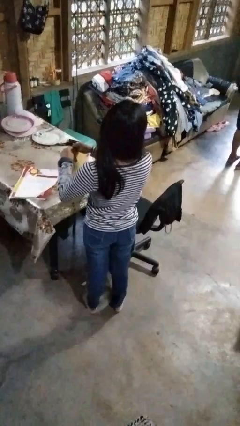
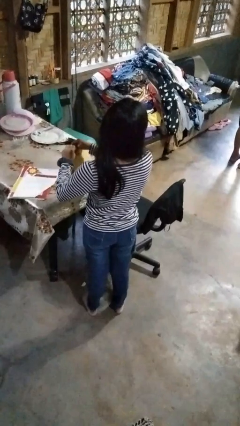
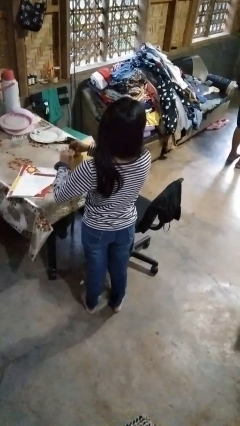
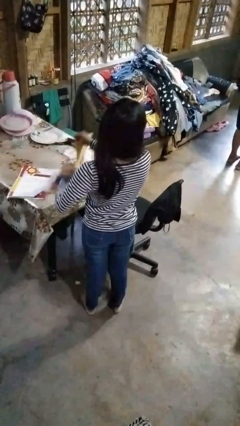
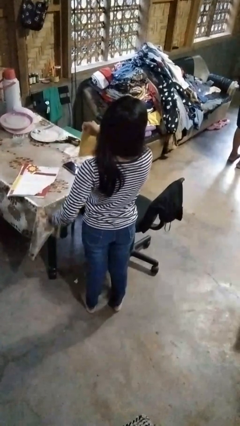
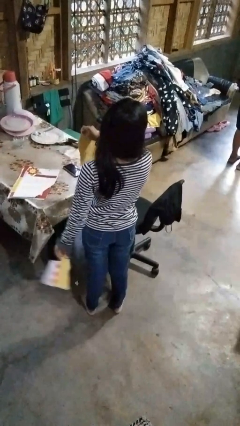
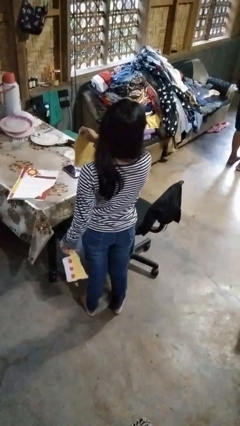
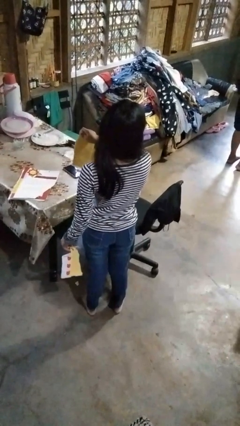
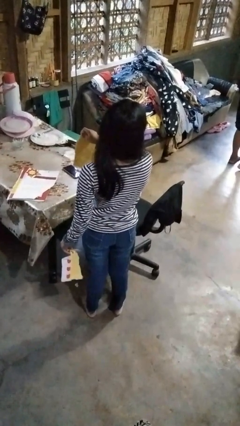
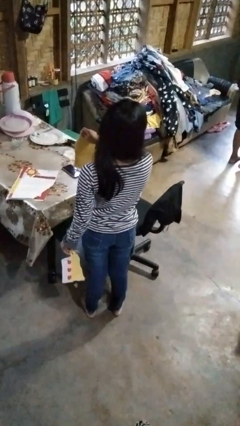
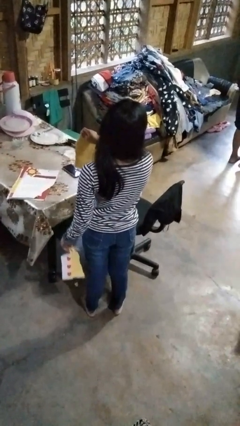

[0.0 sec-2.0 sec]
person tears paper

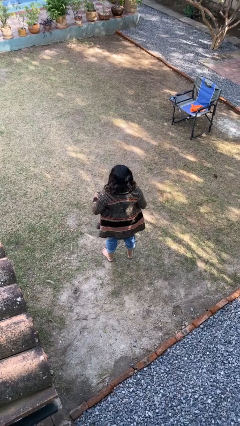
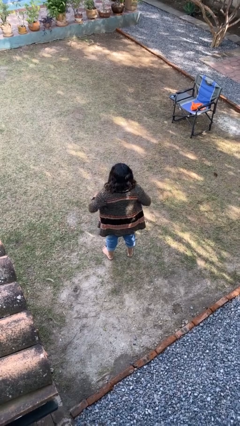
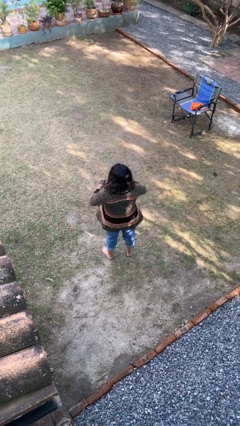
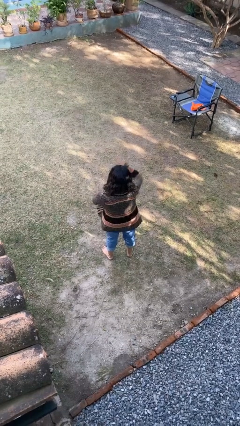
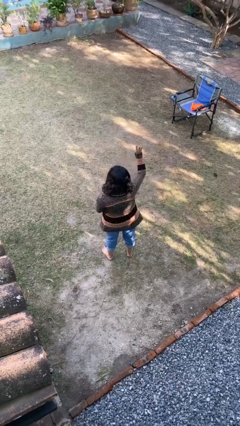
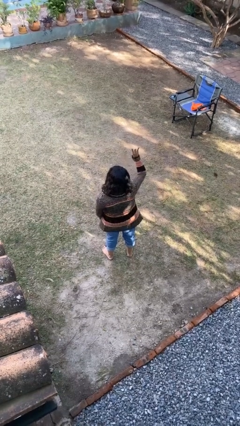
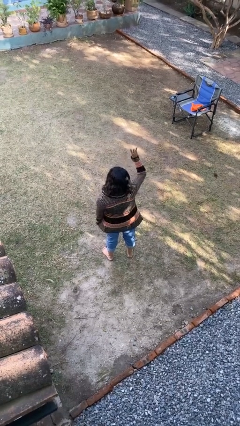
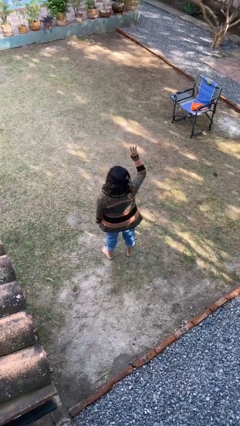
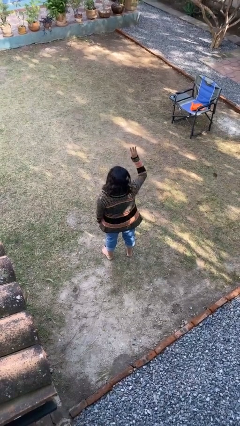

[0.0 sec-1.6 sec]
person gestures number three

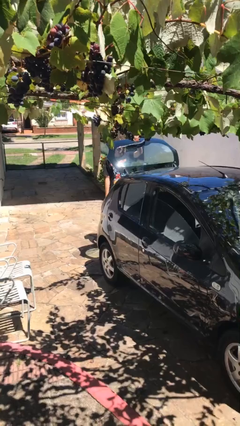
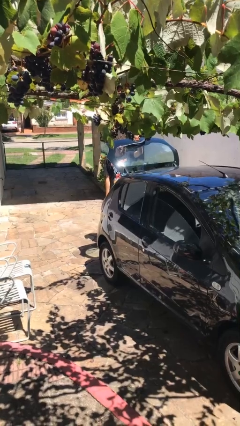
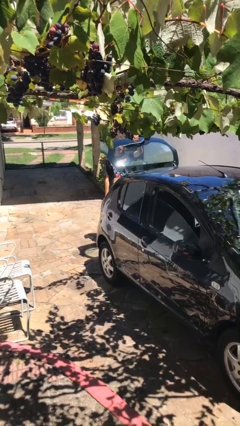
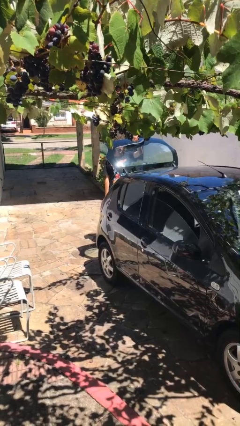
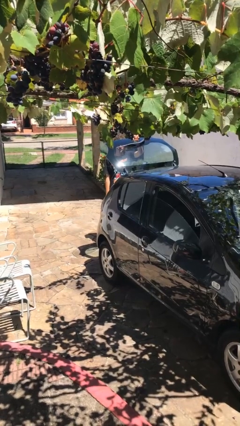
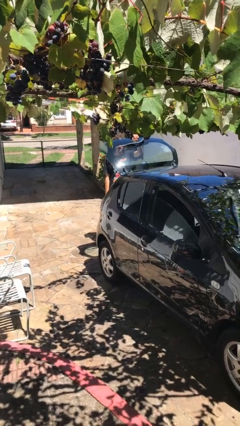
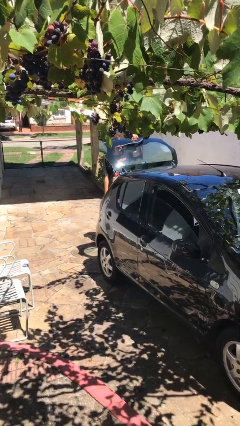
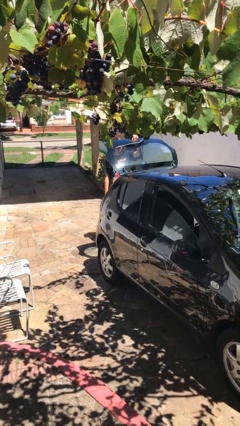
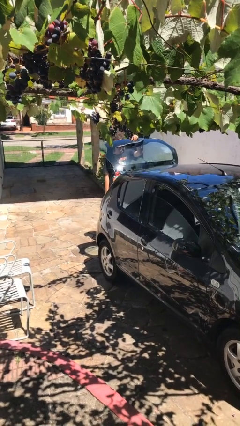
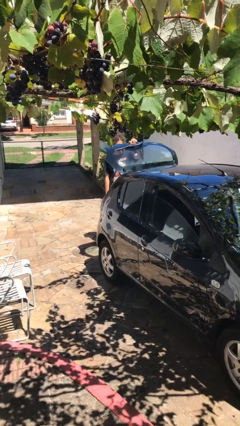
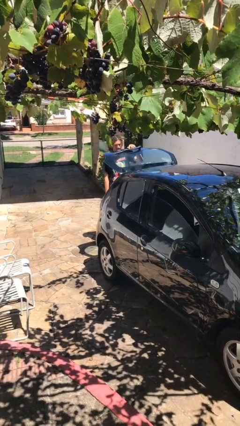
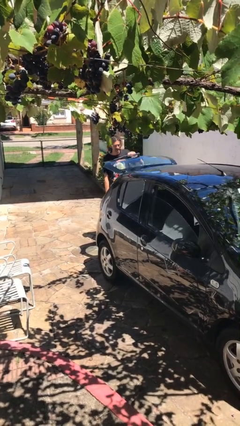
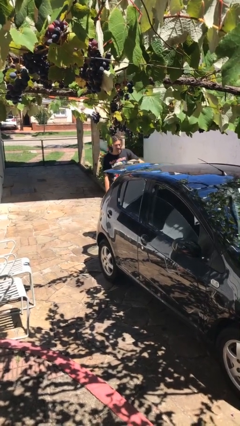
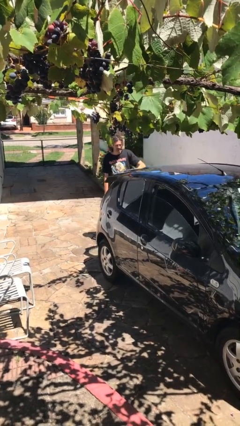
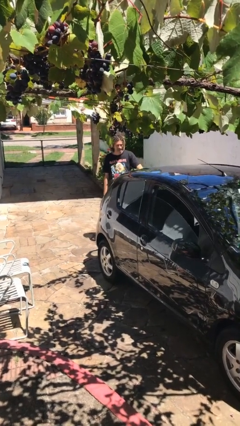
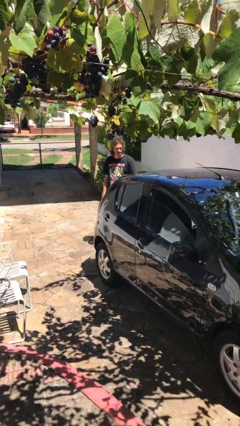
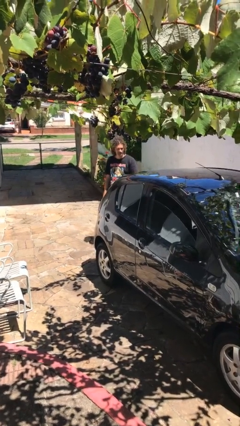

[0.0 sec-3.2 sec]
person closes car trunk

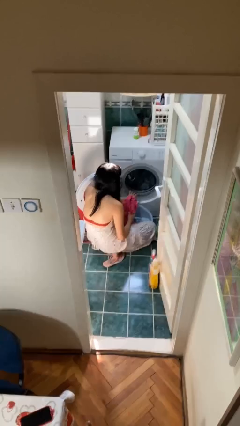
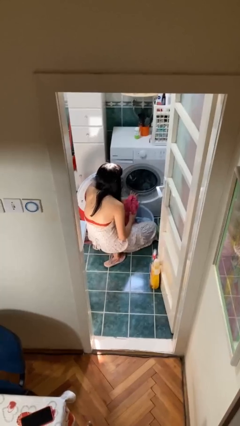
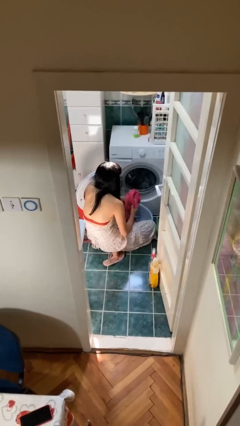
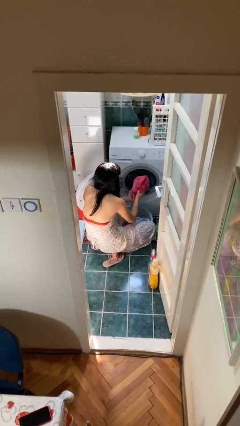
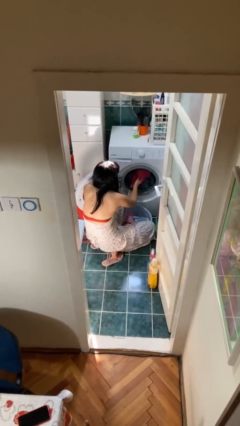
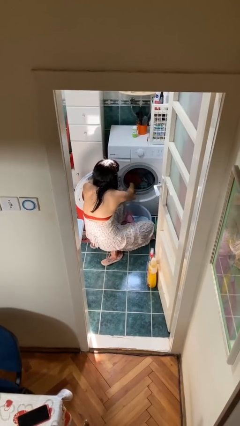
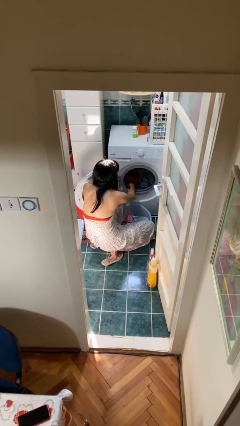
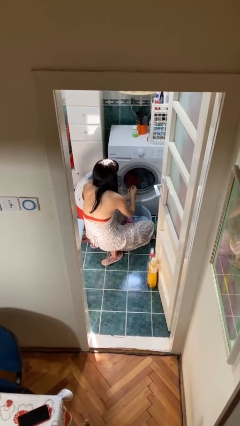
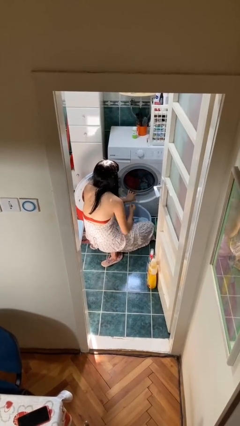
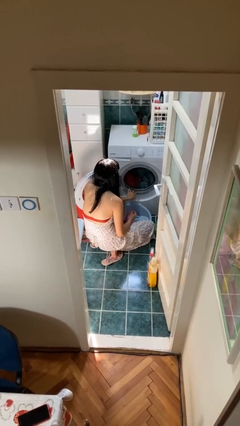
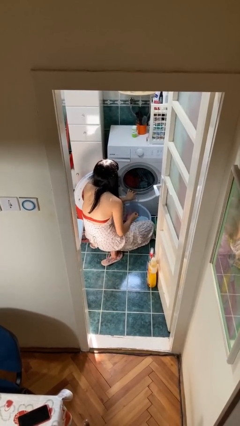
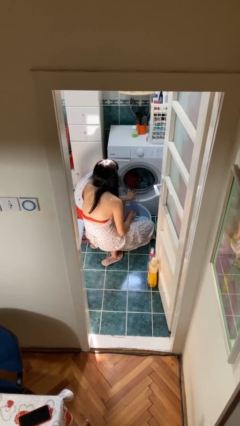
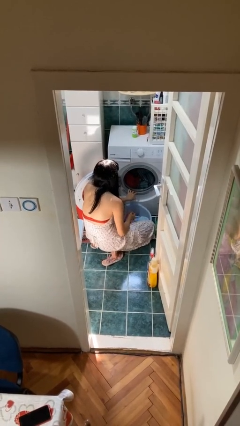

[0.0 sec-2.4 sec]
person loads clotheswasher

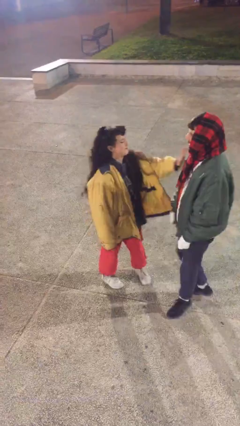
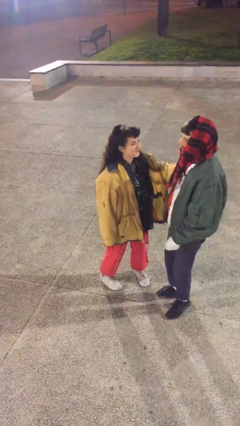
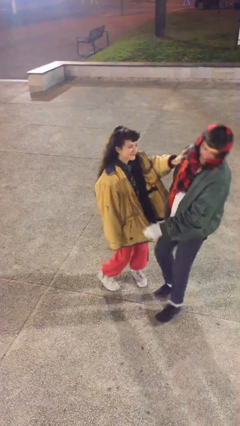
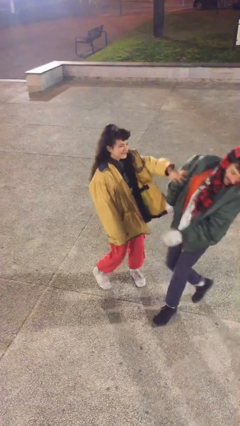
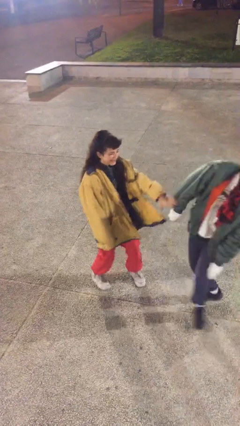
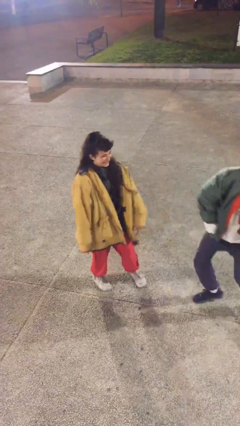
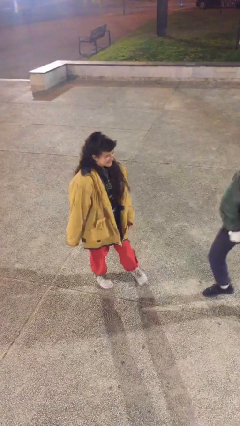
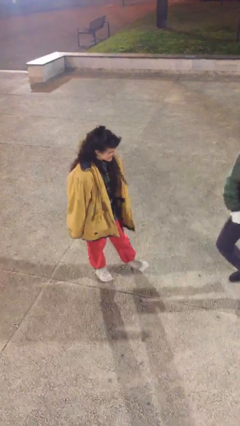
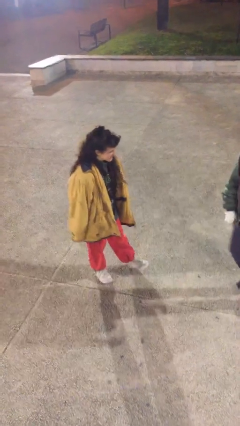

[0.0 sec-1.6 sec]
person shoves person

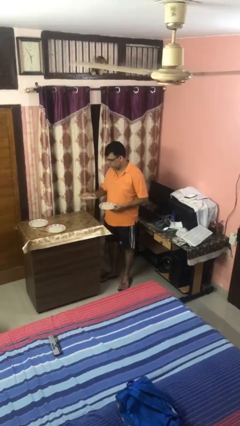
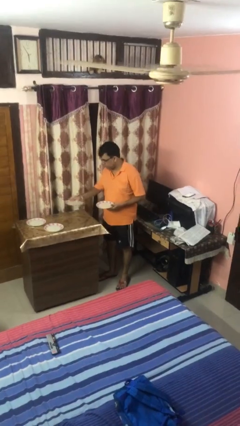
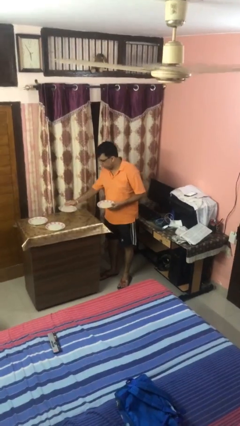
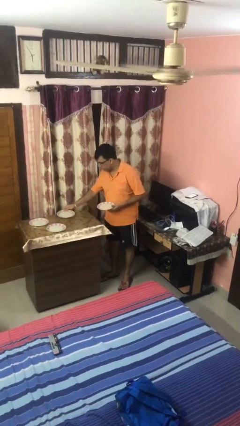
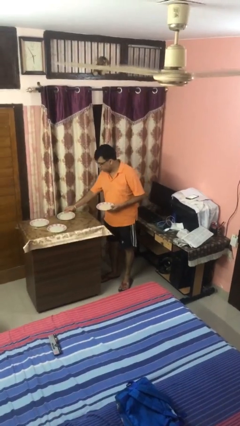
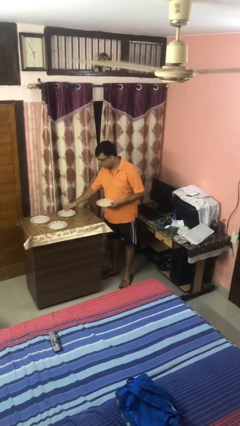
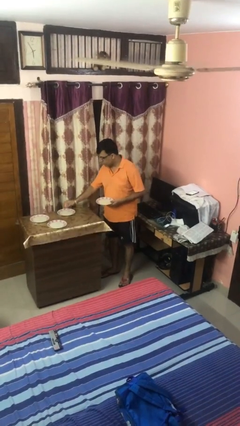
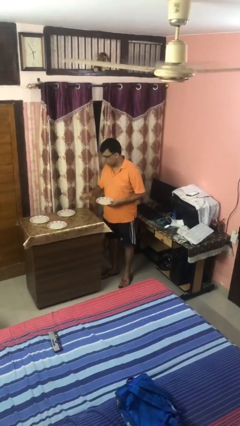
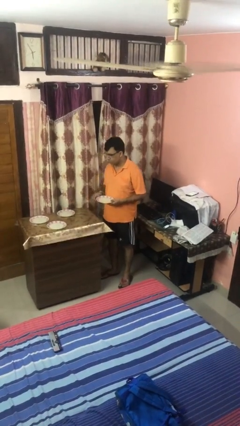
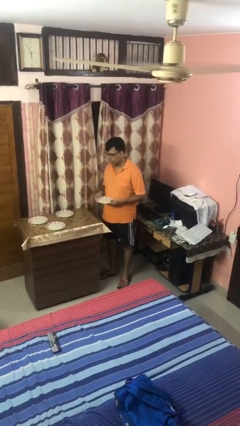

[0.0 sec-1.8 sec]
person sets table

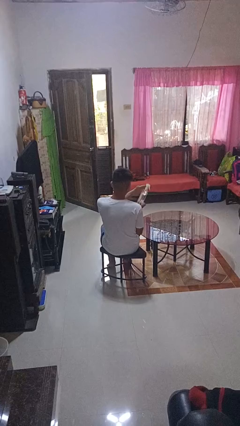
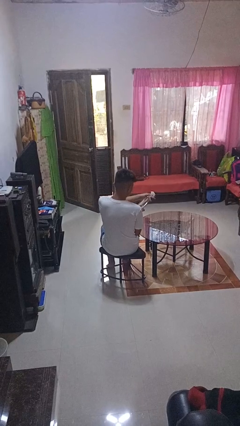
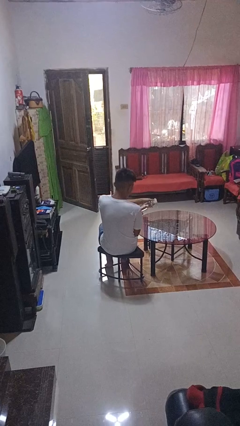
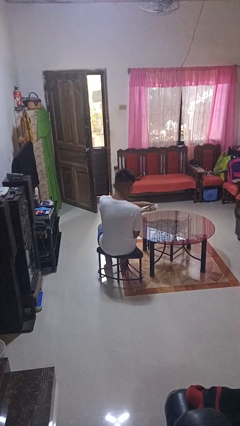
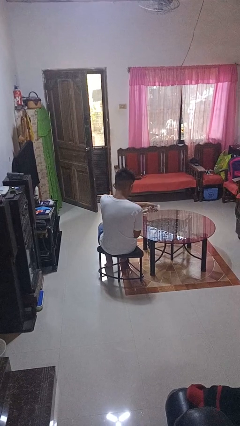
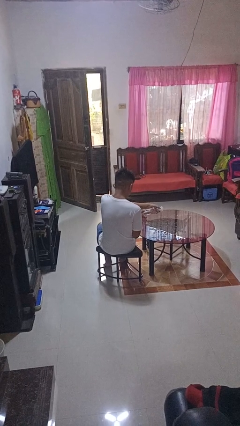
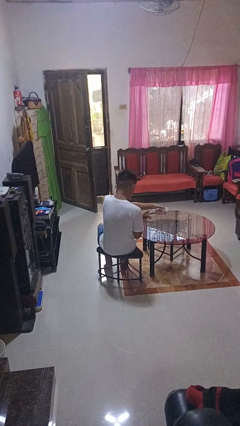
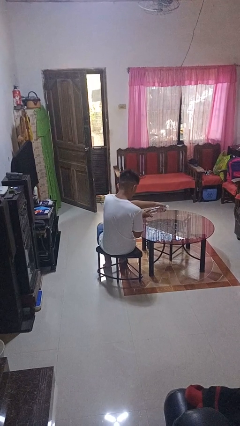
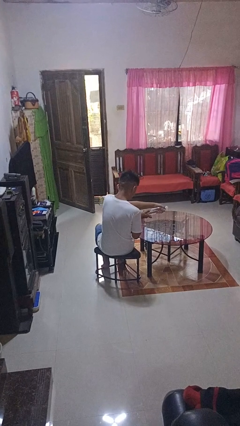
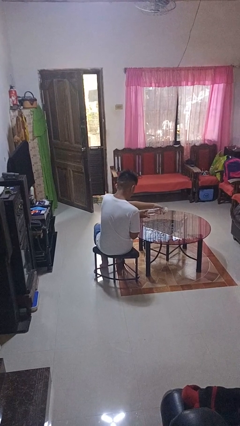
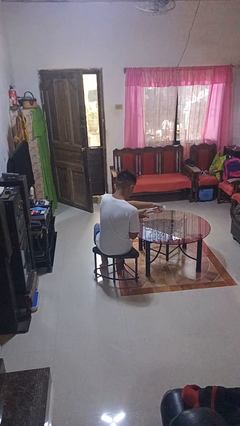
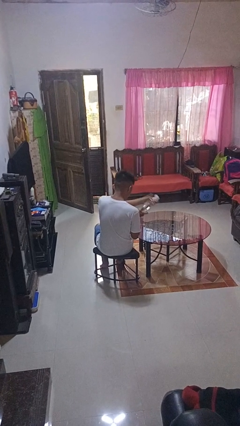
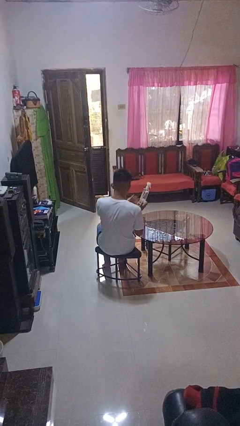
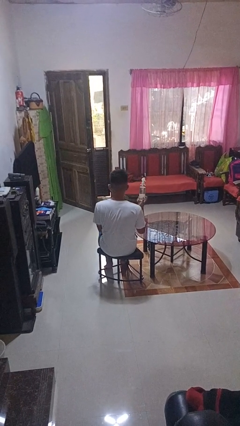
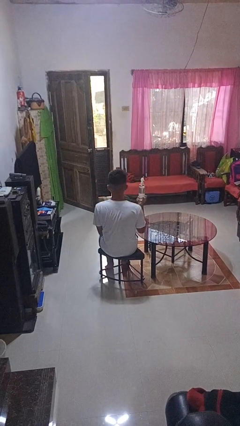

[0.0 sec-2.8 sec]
person sprays from bottle

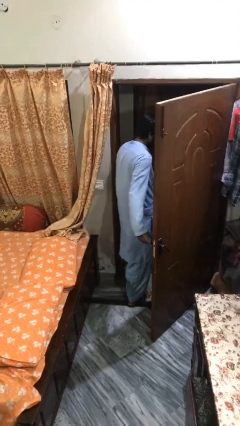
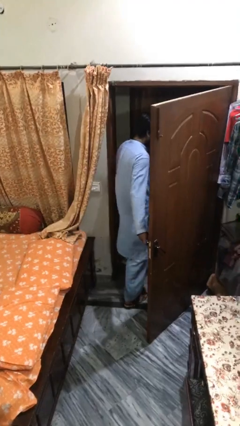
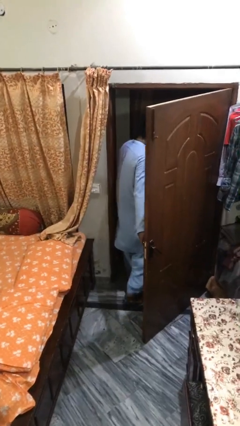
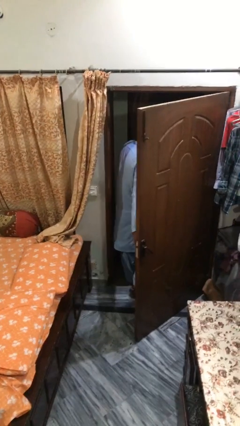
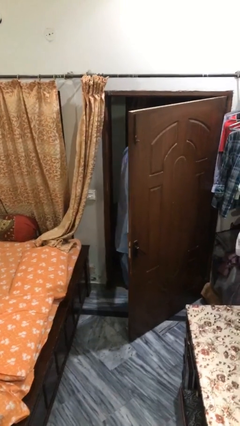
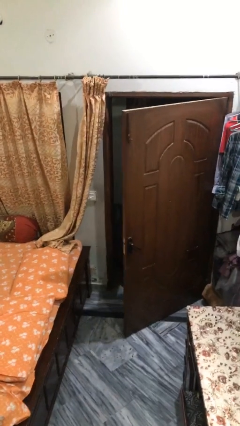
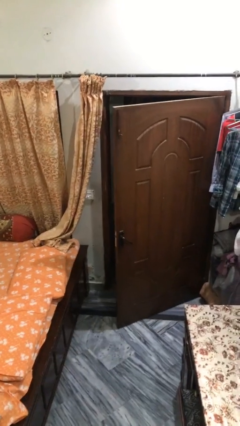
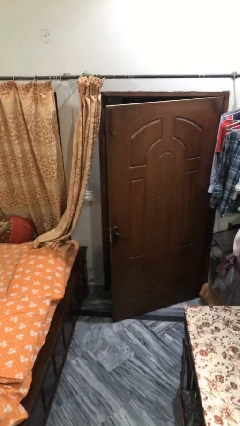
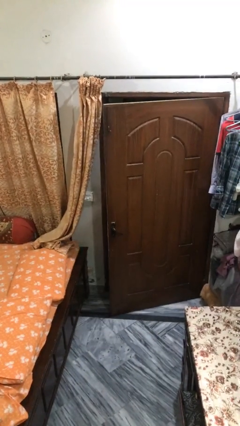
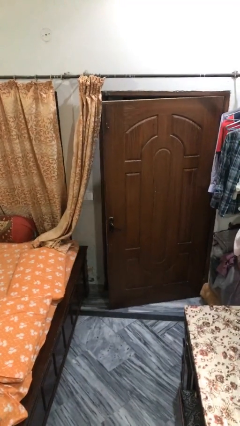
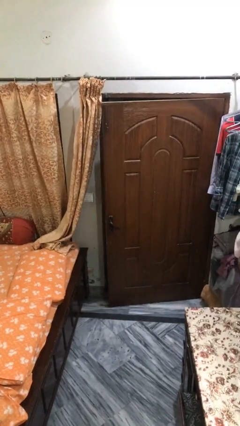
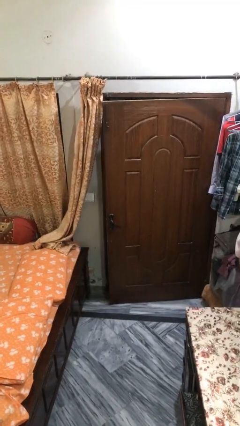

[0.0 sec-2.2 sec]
person closes facility door
